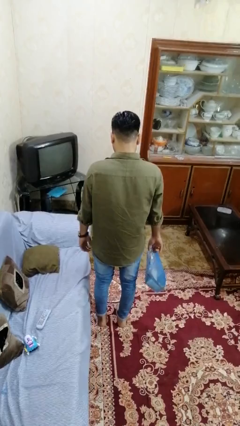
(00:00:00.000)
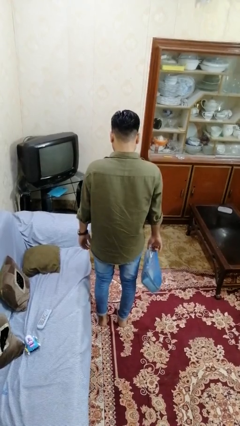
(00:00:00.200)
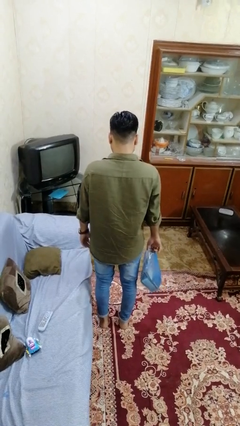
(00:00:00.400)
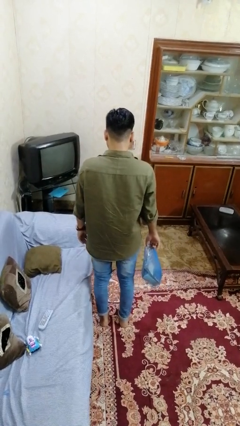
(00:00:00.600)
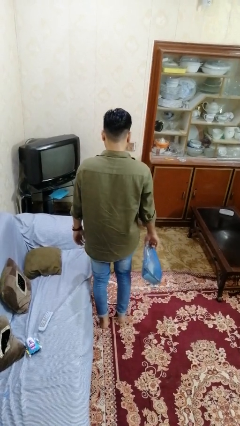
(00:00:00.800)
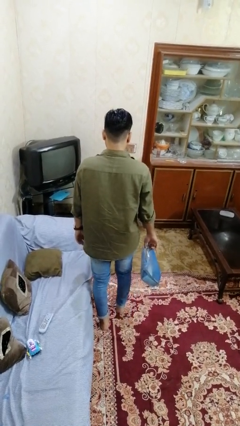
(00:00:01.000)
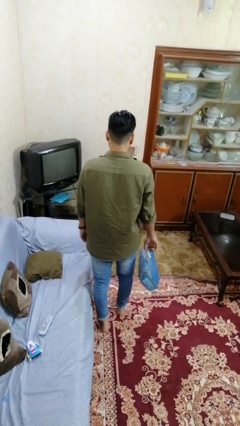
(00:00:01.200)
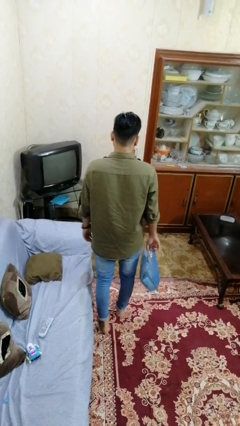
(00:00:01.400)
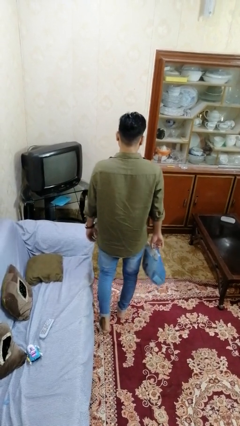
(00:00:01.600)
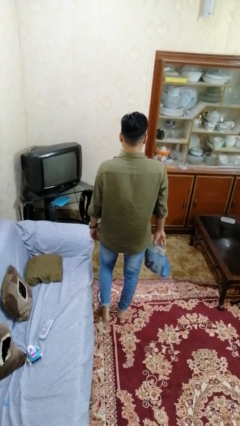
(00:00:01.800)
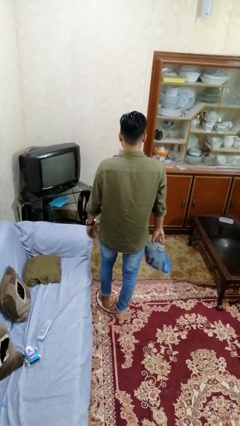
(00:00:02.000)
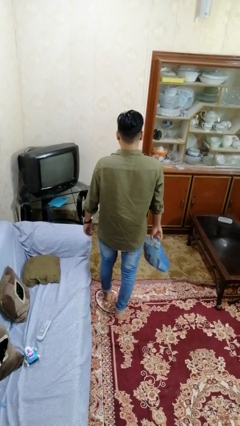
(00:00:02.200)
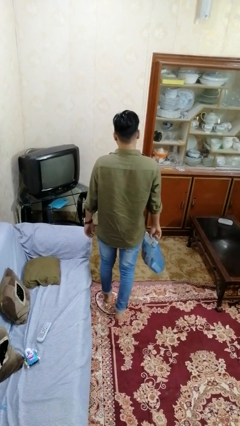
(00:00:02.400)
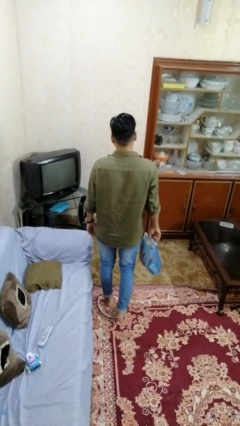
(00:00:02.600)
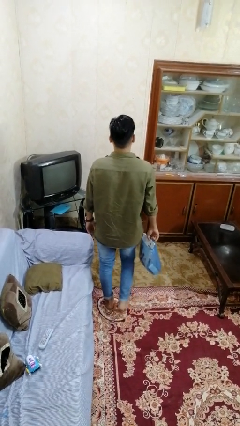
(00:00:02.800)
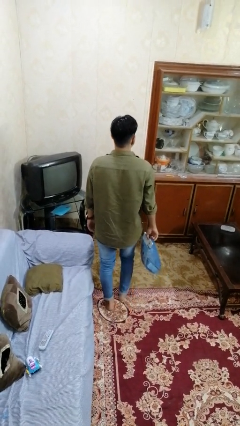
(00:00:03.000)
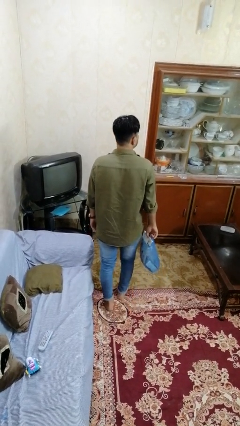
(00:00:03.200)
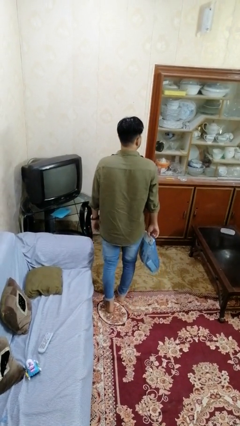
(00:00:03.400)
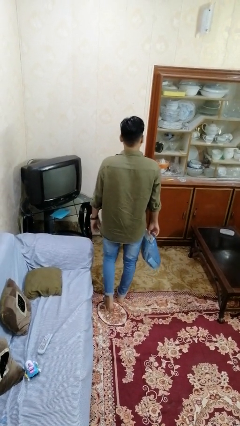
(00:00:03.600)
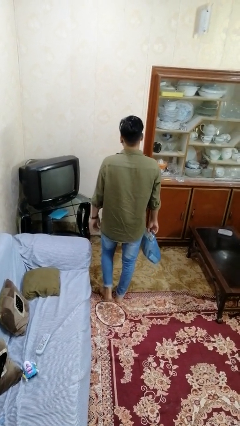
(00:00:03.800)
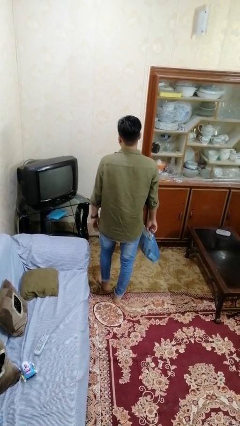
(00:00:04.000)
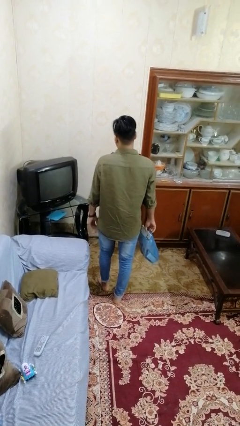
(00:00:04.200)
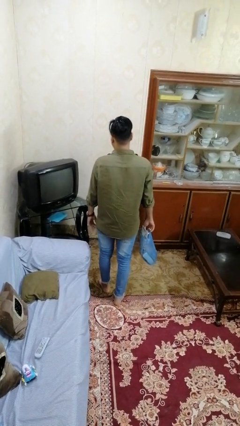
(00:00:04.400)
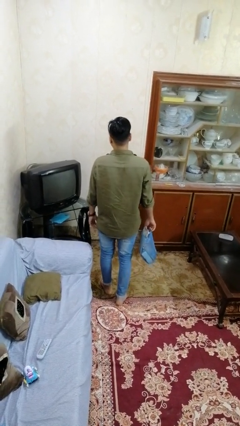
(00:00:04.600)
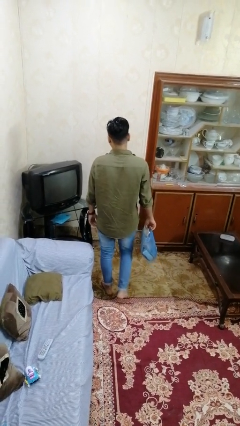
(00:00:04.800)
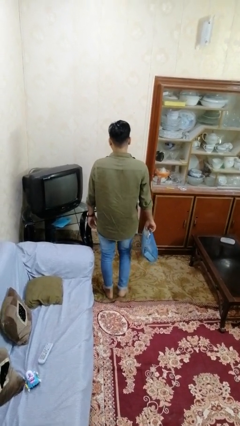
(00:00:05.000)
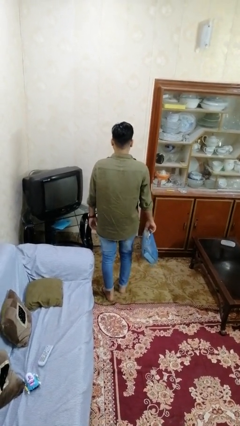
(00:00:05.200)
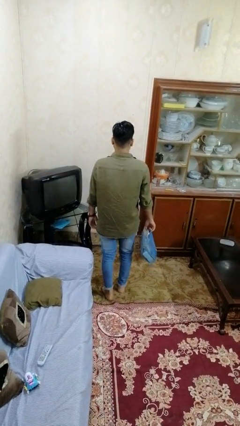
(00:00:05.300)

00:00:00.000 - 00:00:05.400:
person carries groceries

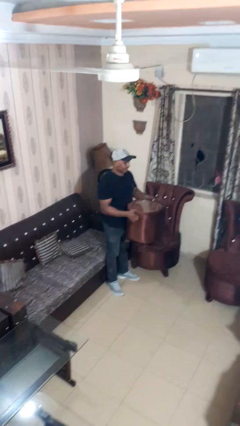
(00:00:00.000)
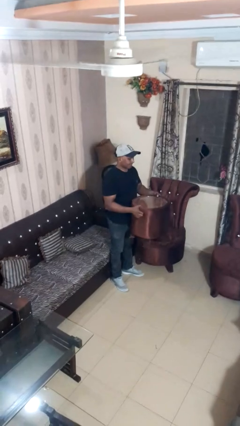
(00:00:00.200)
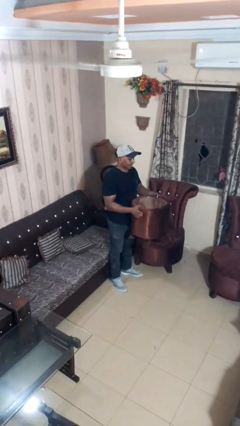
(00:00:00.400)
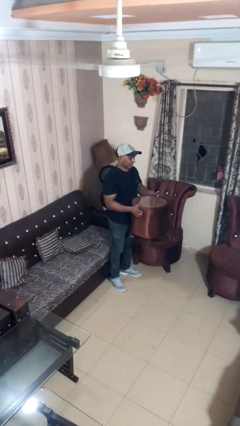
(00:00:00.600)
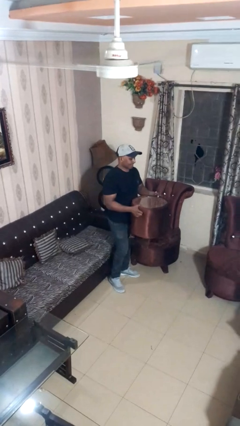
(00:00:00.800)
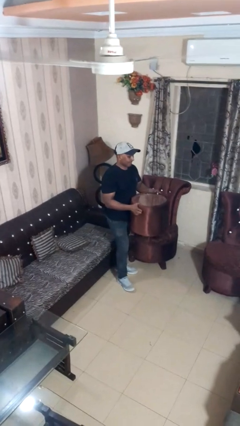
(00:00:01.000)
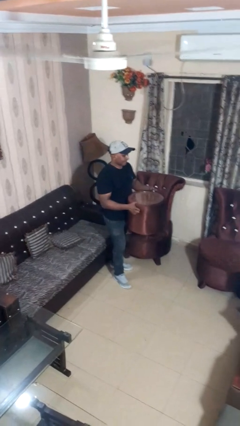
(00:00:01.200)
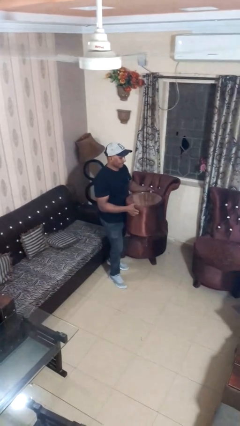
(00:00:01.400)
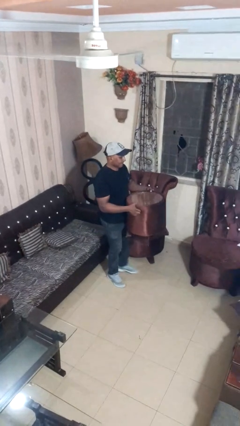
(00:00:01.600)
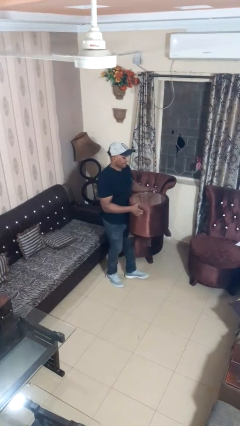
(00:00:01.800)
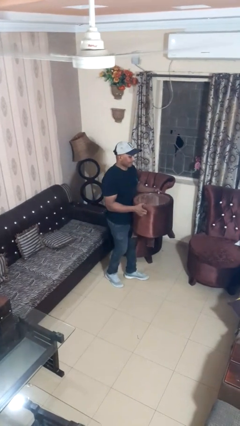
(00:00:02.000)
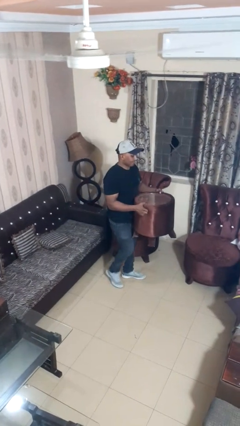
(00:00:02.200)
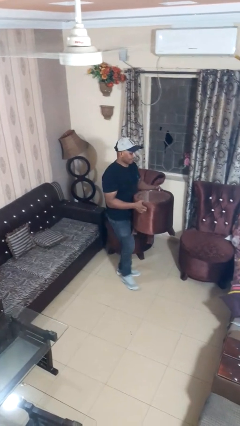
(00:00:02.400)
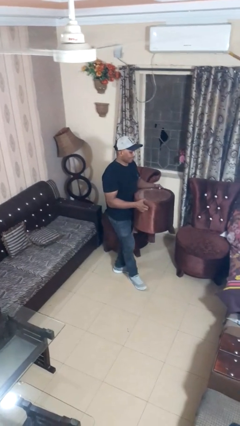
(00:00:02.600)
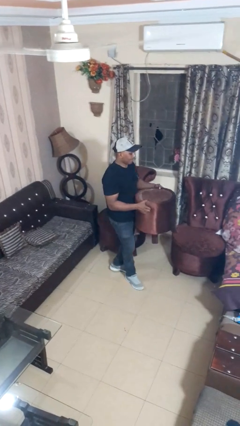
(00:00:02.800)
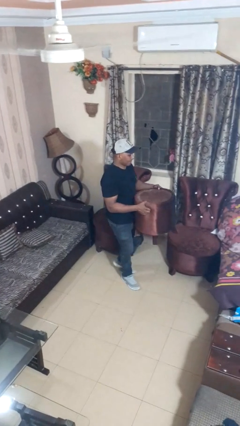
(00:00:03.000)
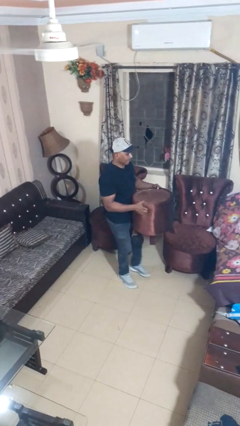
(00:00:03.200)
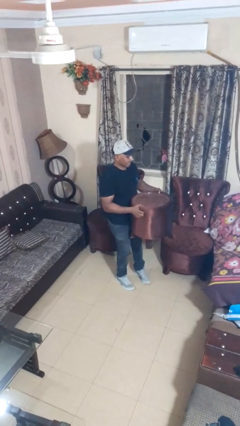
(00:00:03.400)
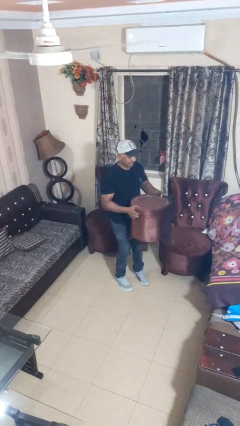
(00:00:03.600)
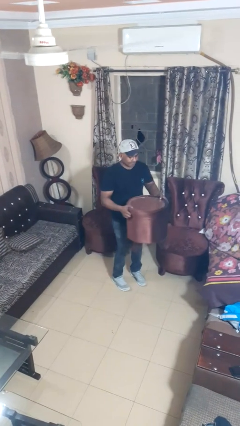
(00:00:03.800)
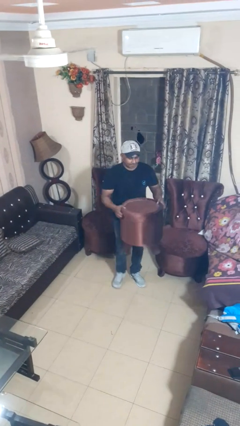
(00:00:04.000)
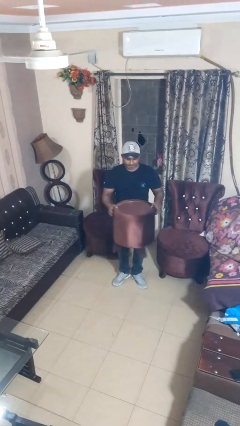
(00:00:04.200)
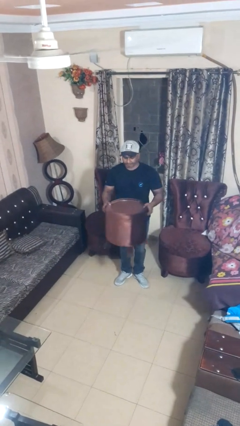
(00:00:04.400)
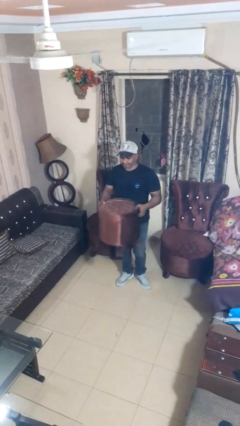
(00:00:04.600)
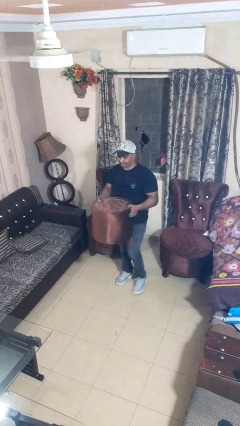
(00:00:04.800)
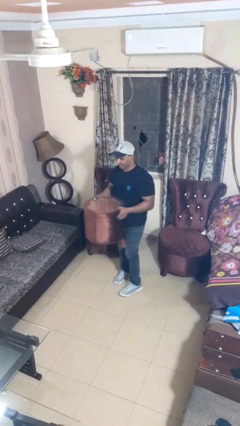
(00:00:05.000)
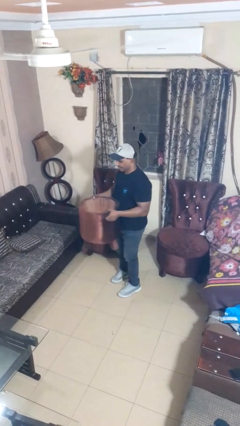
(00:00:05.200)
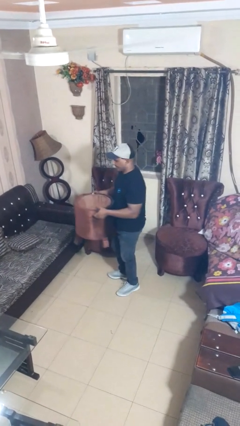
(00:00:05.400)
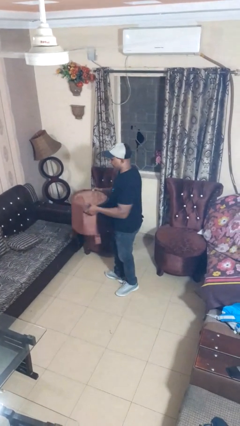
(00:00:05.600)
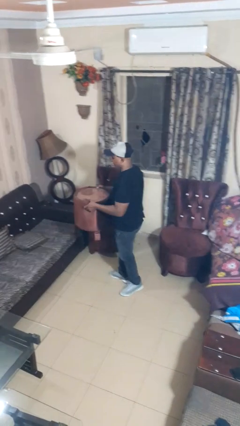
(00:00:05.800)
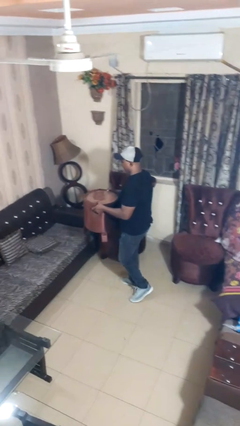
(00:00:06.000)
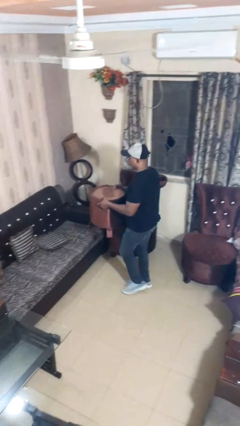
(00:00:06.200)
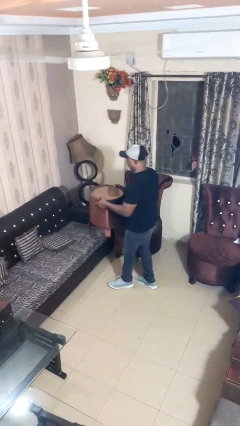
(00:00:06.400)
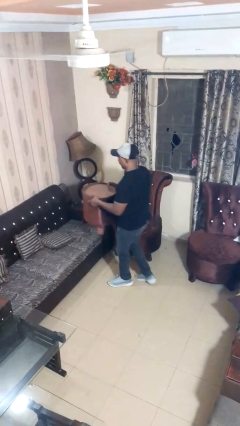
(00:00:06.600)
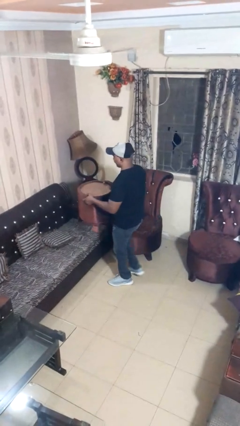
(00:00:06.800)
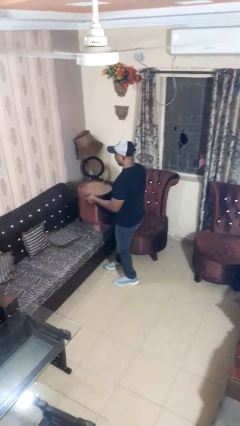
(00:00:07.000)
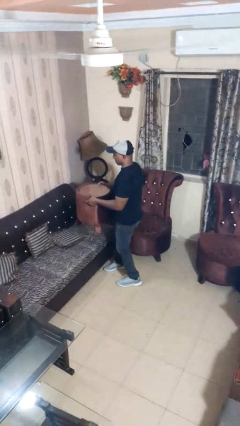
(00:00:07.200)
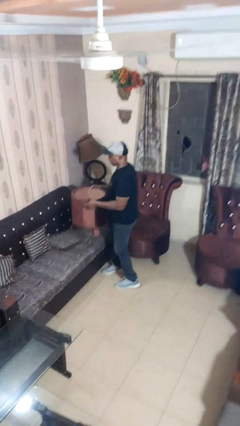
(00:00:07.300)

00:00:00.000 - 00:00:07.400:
person carries furniture

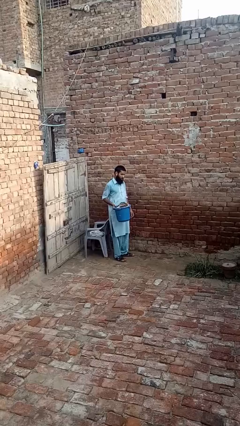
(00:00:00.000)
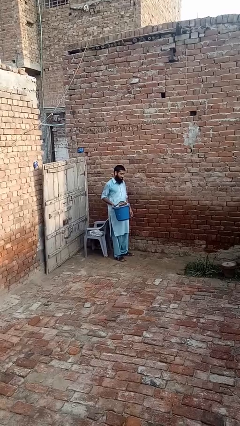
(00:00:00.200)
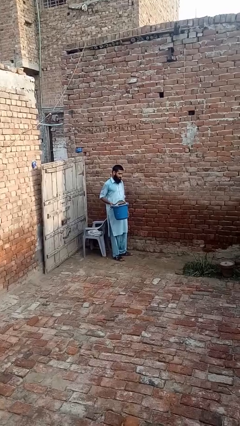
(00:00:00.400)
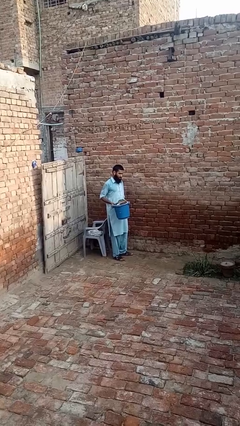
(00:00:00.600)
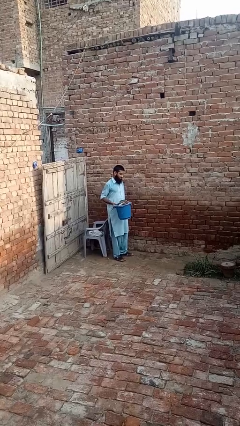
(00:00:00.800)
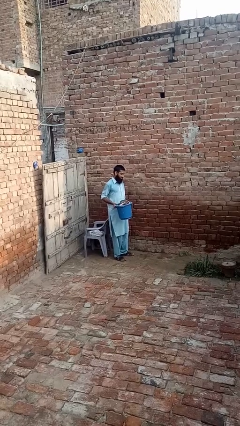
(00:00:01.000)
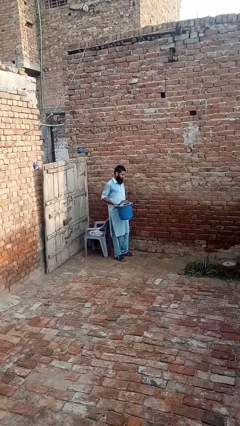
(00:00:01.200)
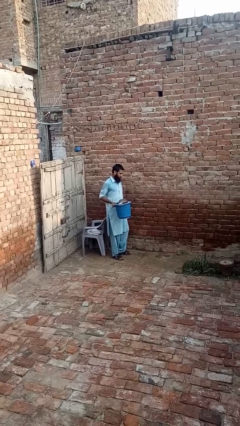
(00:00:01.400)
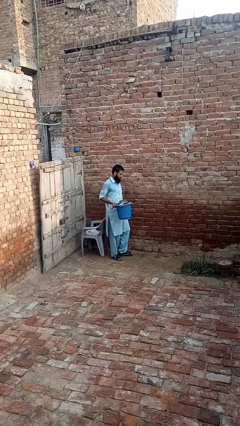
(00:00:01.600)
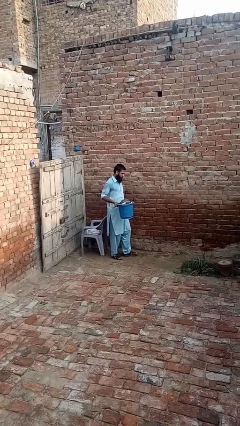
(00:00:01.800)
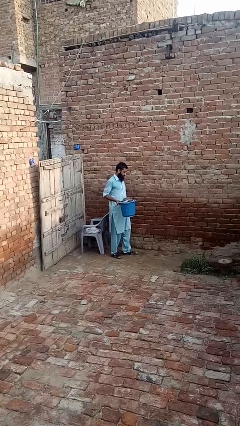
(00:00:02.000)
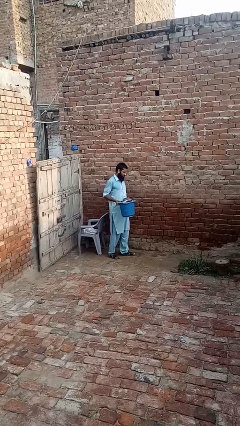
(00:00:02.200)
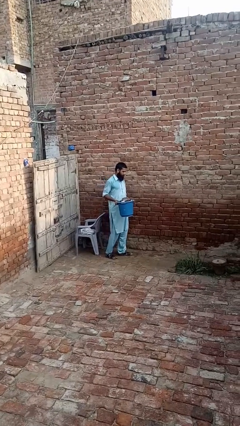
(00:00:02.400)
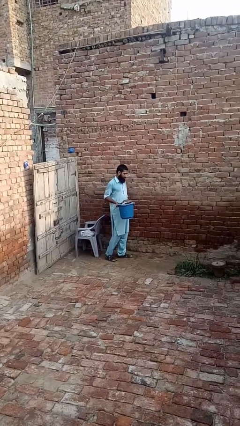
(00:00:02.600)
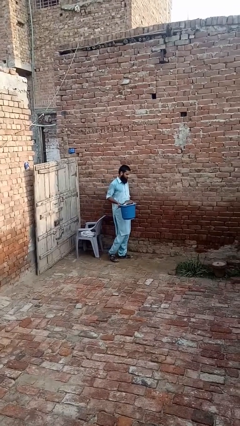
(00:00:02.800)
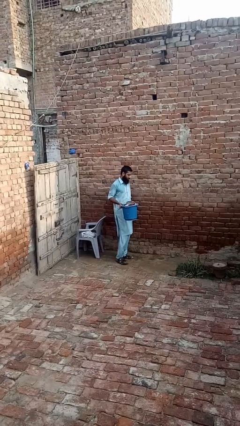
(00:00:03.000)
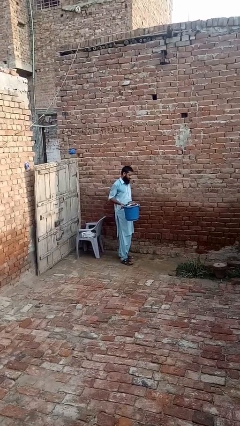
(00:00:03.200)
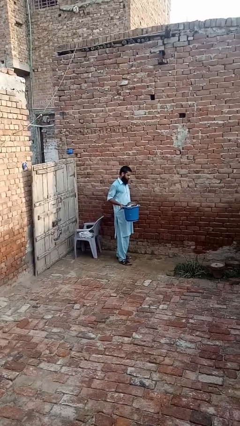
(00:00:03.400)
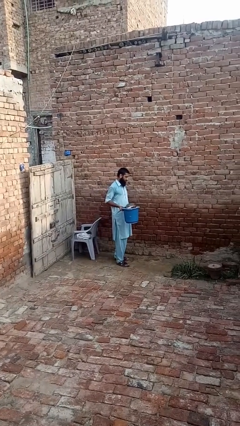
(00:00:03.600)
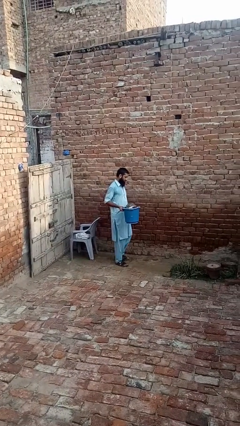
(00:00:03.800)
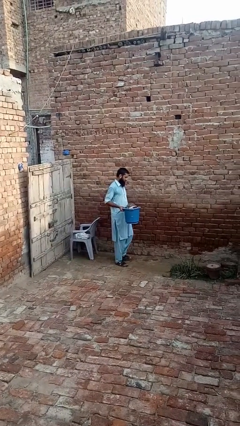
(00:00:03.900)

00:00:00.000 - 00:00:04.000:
person carries laundry basket

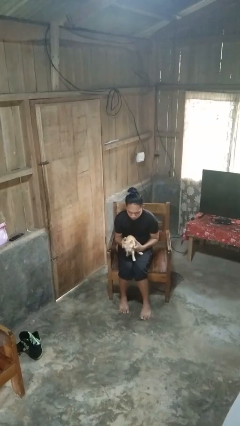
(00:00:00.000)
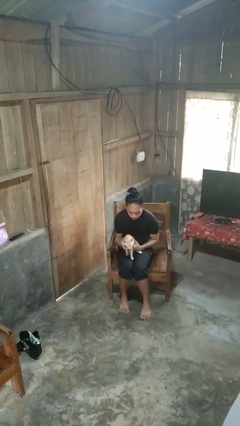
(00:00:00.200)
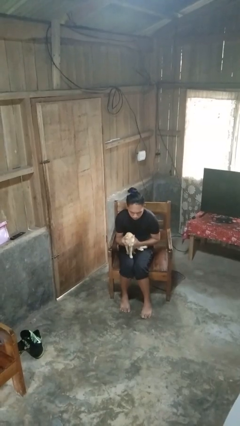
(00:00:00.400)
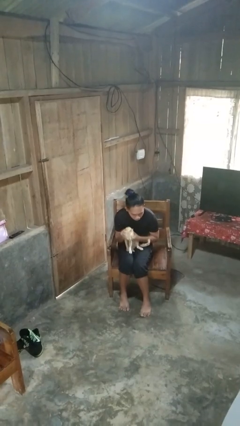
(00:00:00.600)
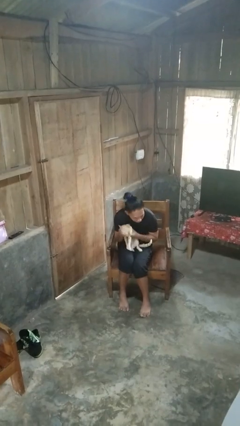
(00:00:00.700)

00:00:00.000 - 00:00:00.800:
person hugs cat
